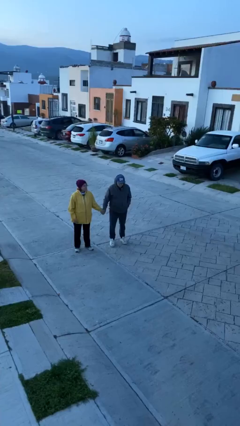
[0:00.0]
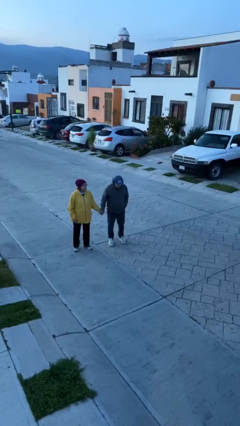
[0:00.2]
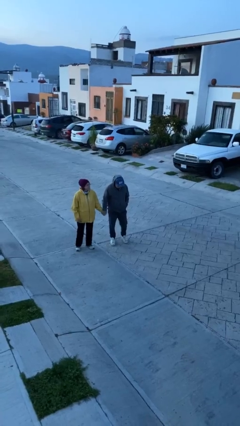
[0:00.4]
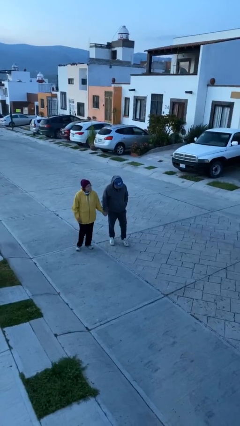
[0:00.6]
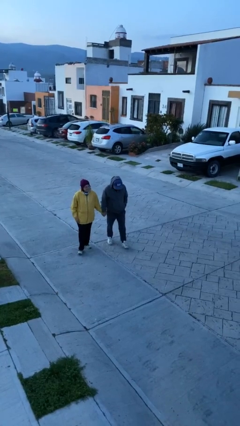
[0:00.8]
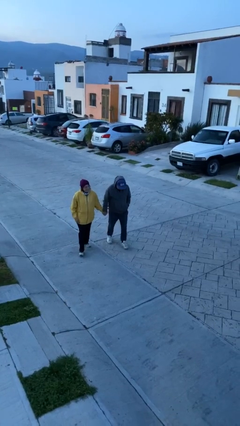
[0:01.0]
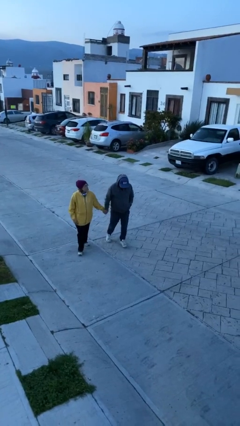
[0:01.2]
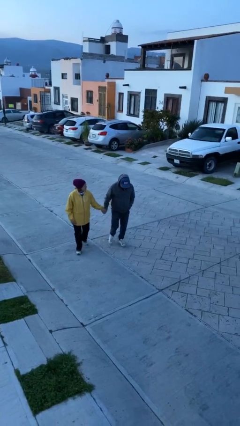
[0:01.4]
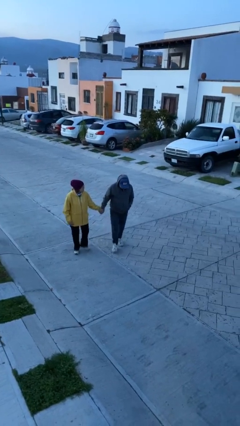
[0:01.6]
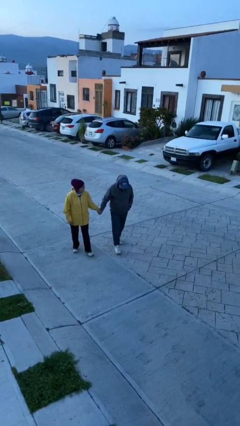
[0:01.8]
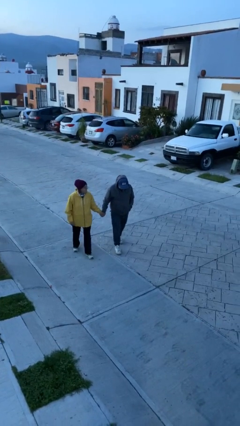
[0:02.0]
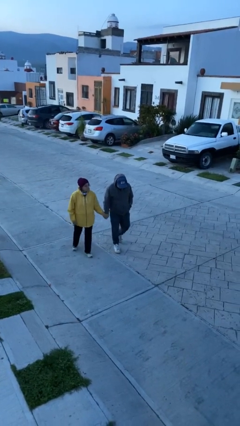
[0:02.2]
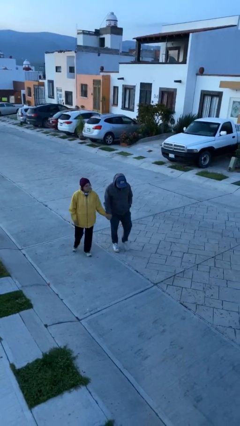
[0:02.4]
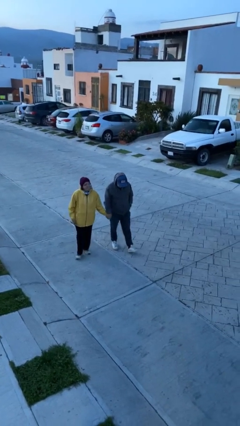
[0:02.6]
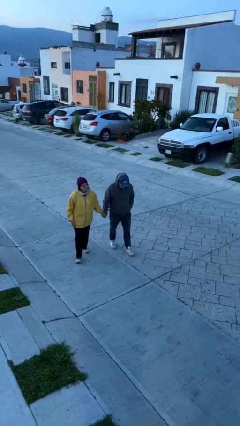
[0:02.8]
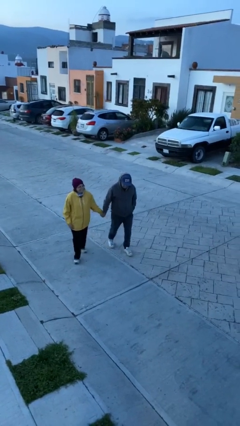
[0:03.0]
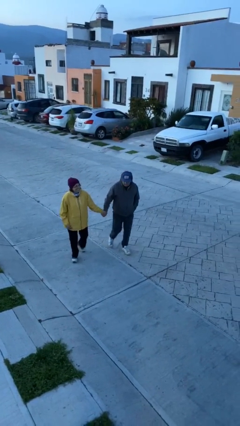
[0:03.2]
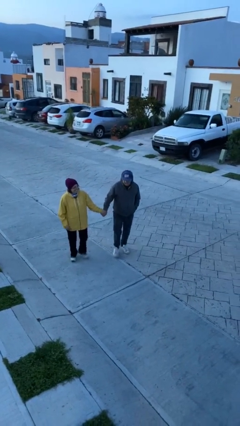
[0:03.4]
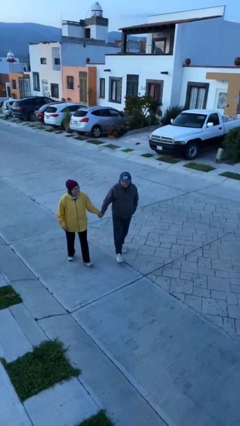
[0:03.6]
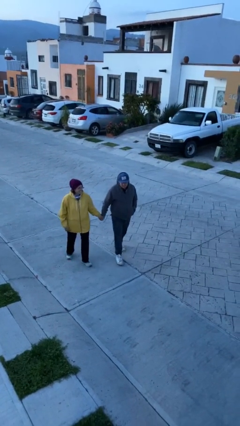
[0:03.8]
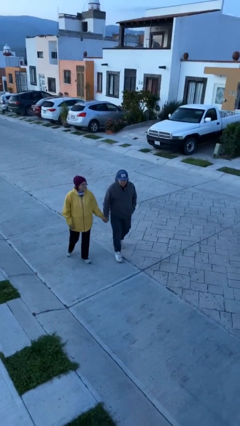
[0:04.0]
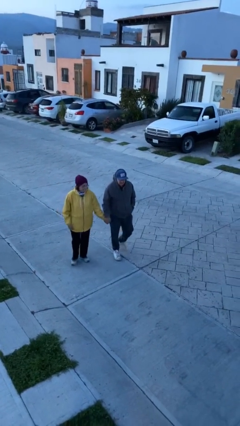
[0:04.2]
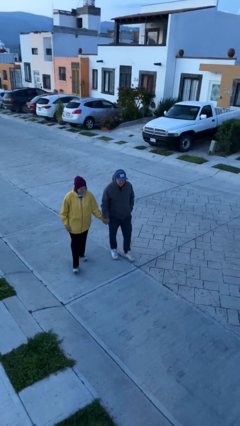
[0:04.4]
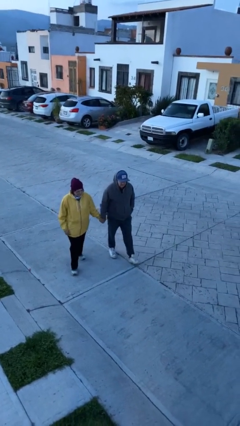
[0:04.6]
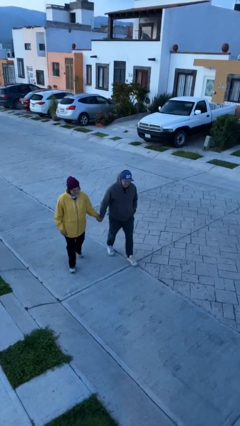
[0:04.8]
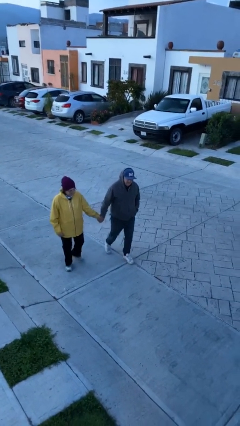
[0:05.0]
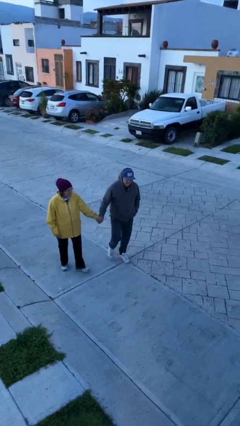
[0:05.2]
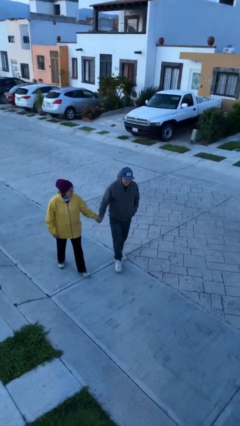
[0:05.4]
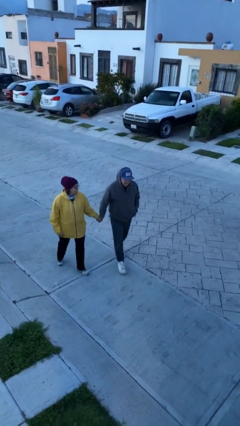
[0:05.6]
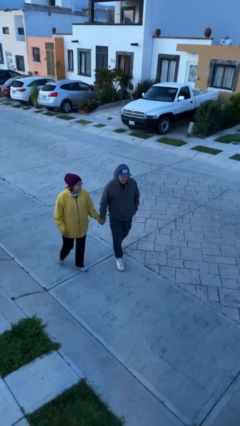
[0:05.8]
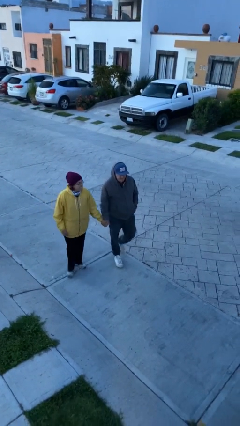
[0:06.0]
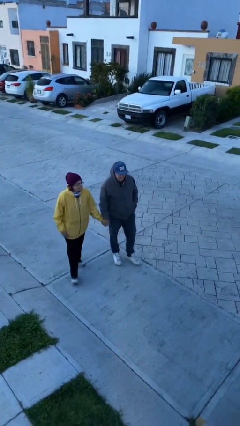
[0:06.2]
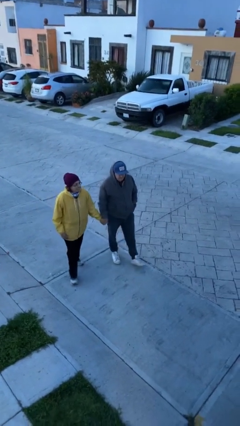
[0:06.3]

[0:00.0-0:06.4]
person holds hand

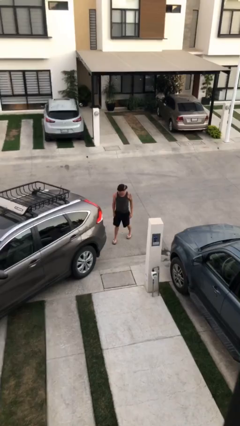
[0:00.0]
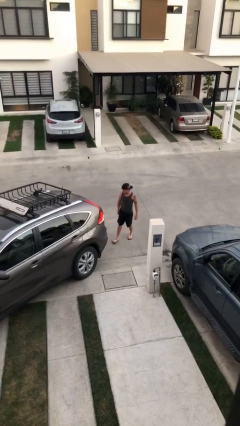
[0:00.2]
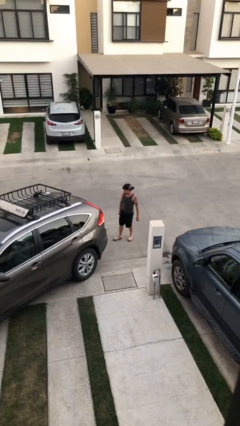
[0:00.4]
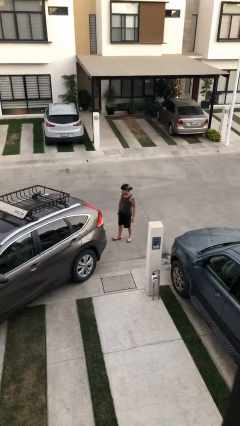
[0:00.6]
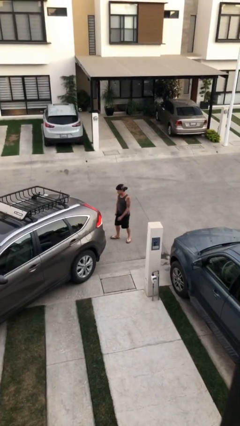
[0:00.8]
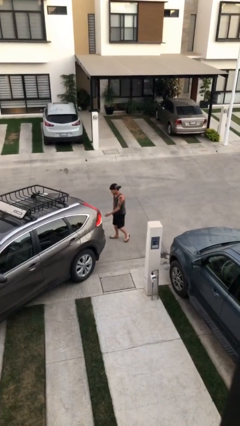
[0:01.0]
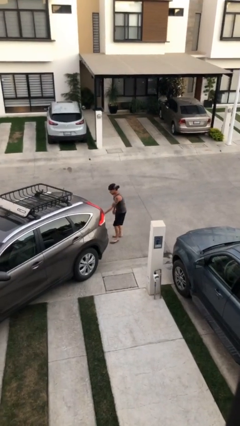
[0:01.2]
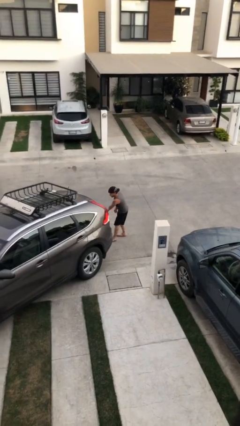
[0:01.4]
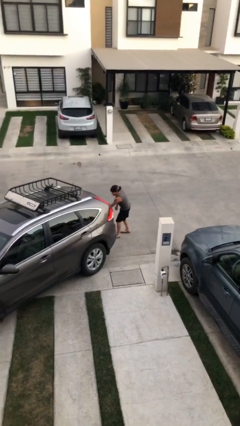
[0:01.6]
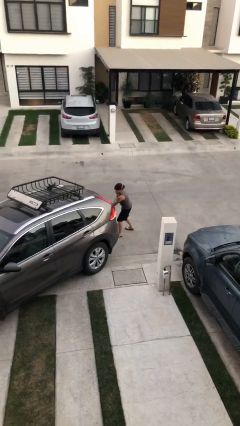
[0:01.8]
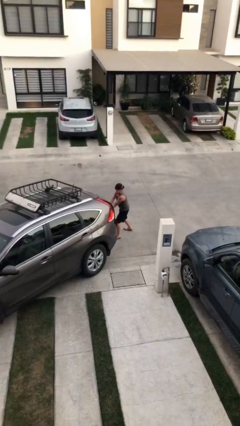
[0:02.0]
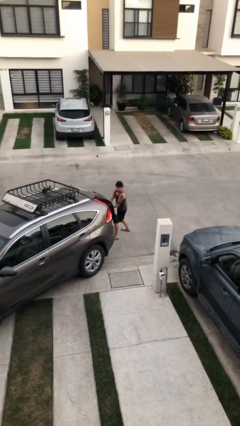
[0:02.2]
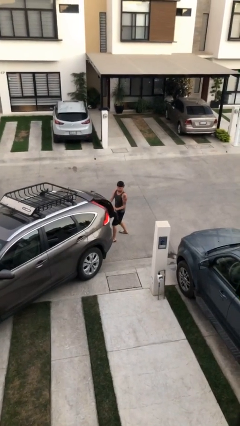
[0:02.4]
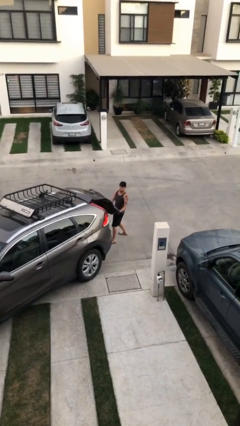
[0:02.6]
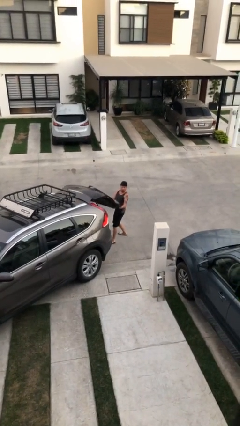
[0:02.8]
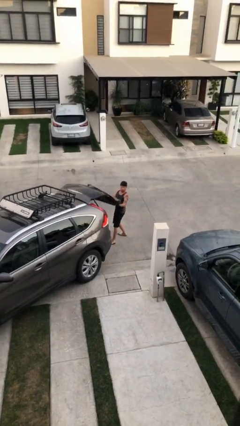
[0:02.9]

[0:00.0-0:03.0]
person opens car trunk

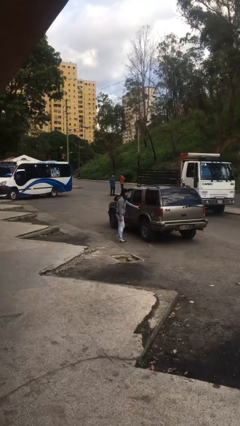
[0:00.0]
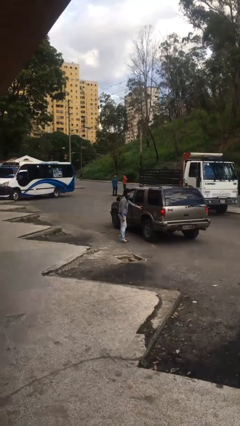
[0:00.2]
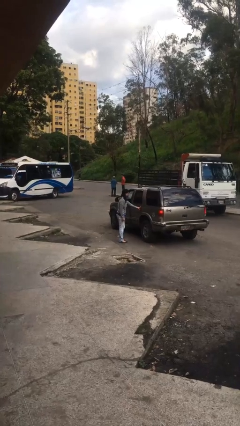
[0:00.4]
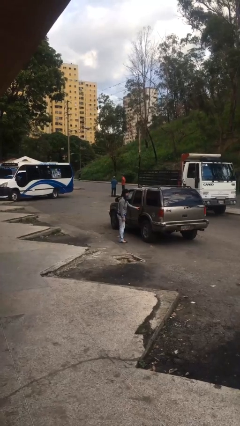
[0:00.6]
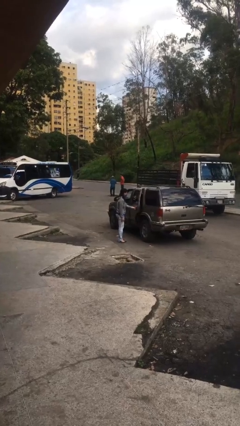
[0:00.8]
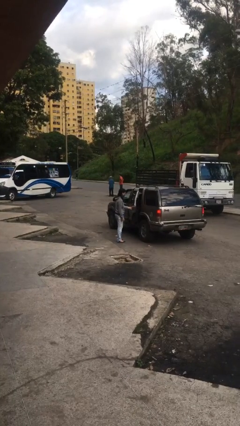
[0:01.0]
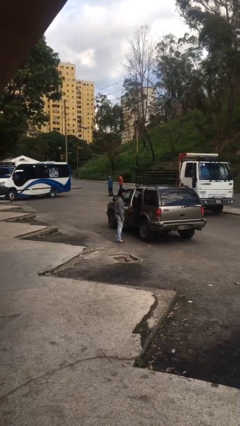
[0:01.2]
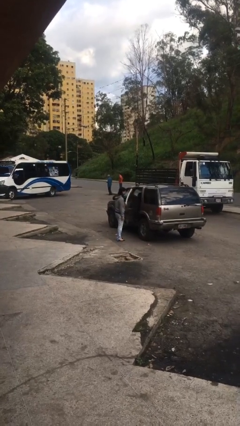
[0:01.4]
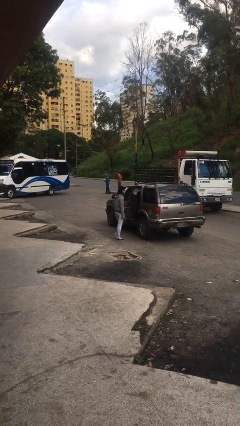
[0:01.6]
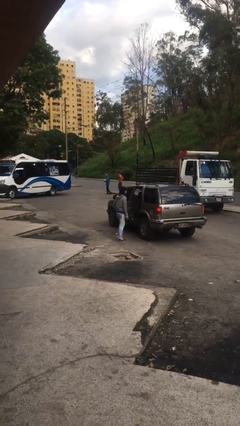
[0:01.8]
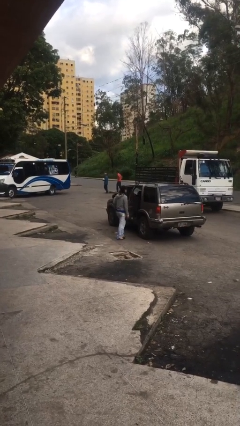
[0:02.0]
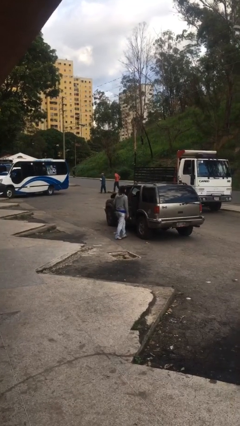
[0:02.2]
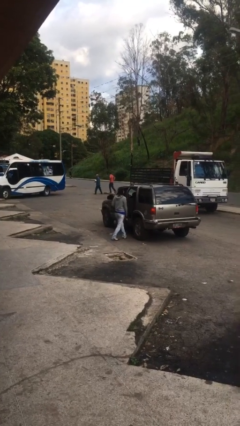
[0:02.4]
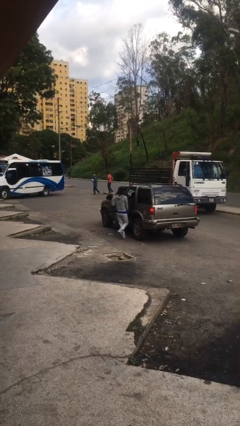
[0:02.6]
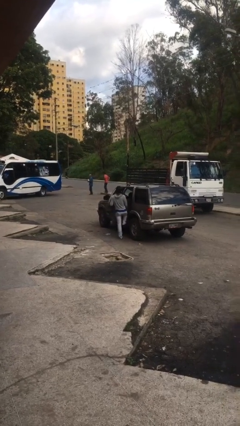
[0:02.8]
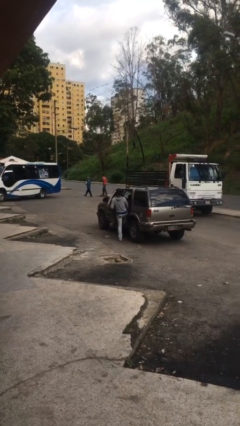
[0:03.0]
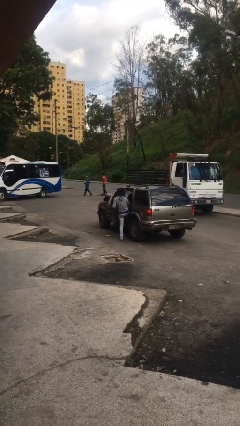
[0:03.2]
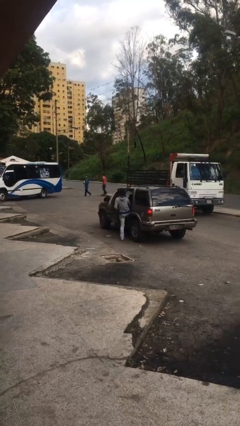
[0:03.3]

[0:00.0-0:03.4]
person opens car door

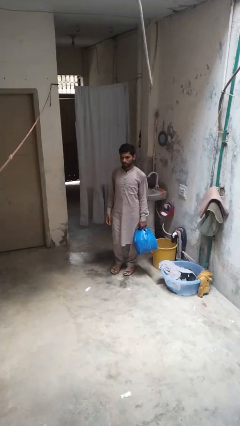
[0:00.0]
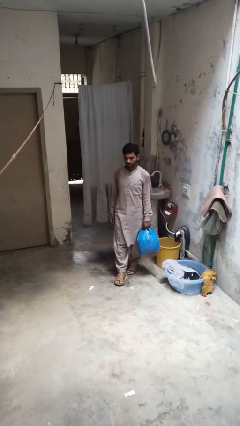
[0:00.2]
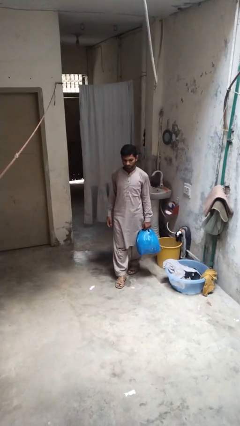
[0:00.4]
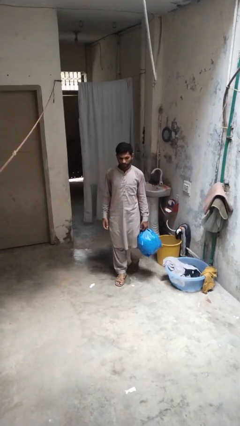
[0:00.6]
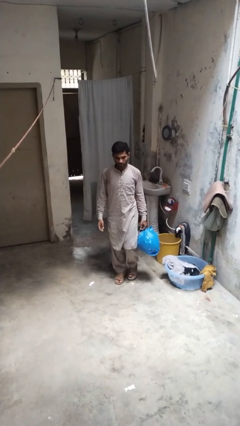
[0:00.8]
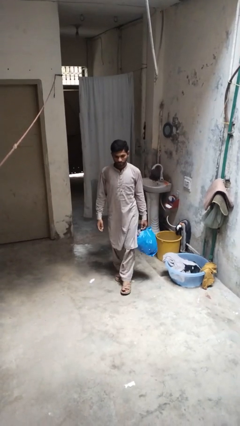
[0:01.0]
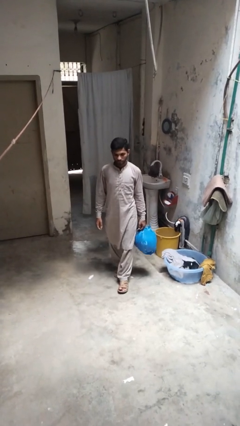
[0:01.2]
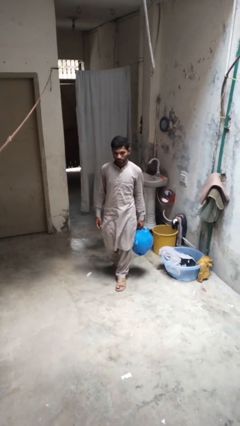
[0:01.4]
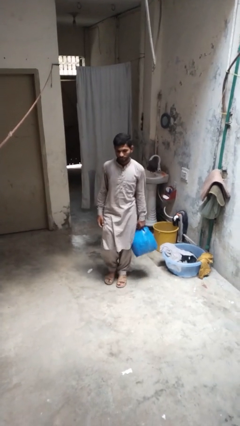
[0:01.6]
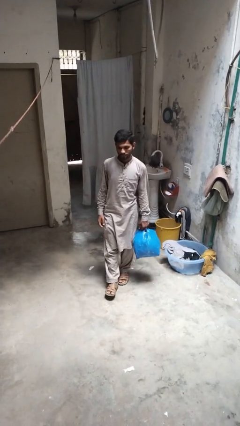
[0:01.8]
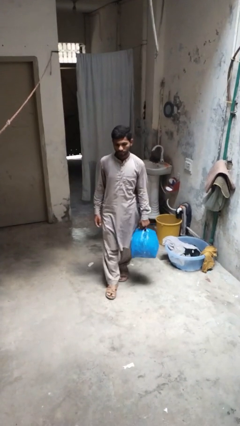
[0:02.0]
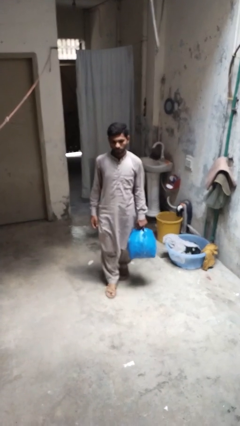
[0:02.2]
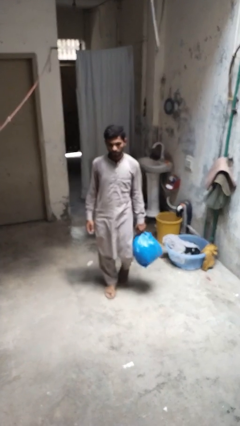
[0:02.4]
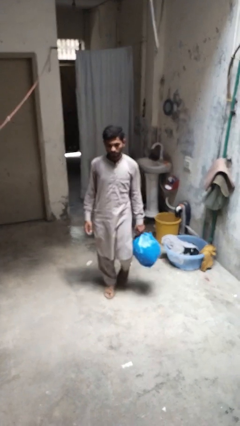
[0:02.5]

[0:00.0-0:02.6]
person carries groceries

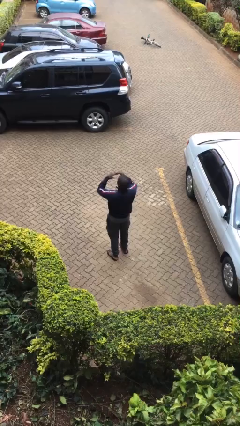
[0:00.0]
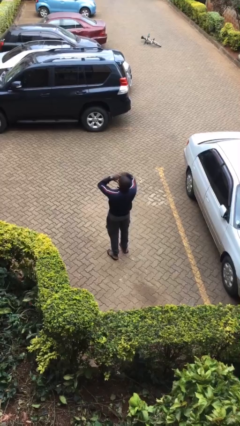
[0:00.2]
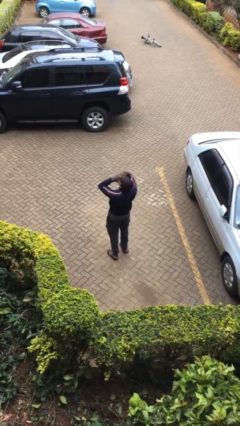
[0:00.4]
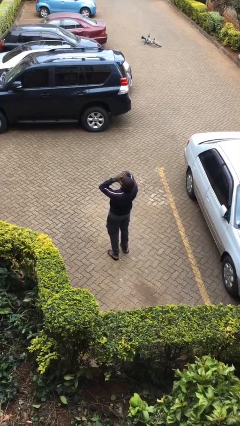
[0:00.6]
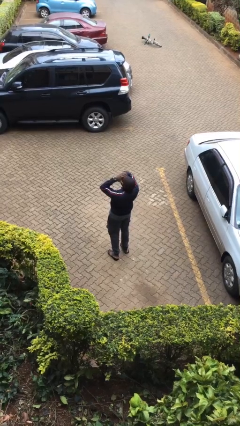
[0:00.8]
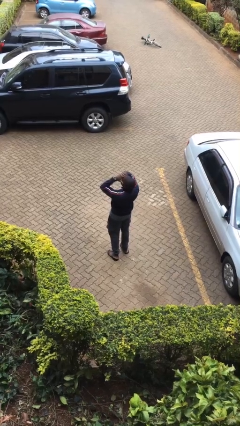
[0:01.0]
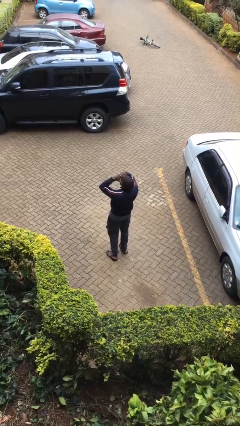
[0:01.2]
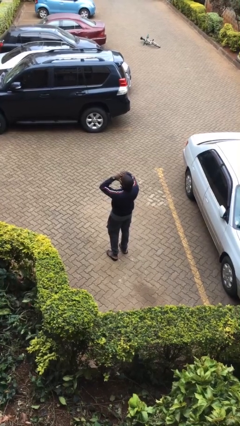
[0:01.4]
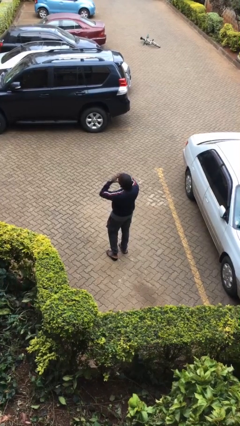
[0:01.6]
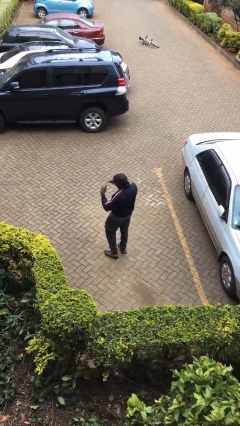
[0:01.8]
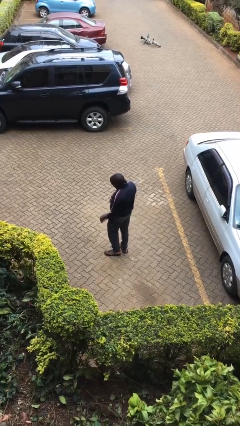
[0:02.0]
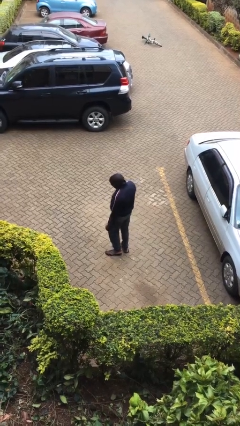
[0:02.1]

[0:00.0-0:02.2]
person shades eyes
